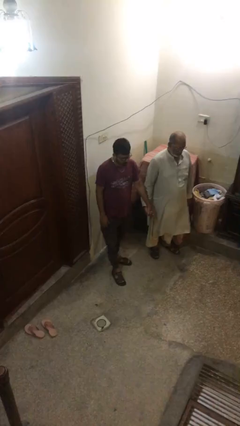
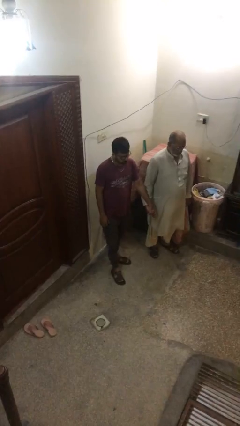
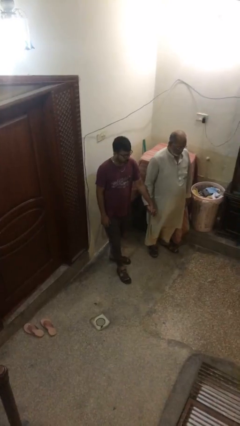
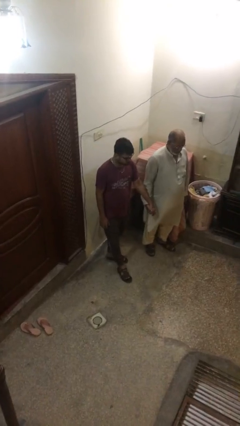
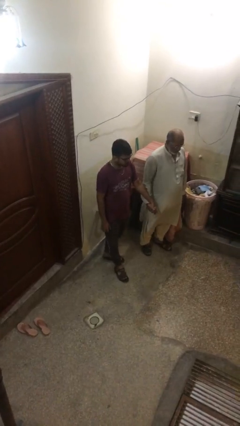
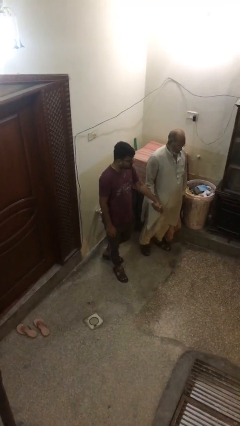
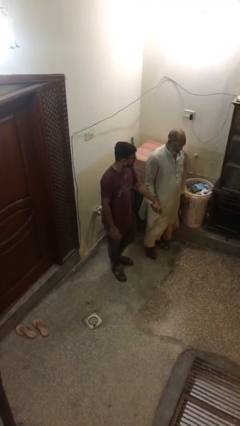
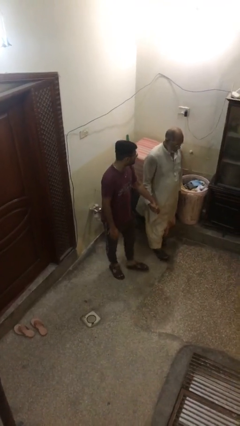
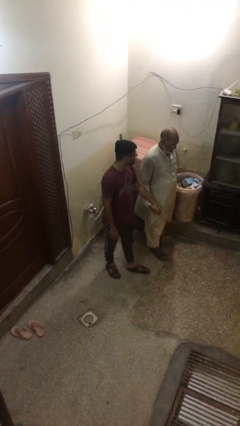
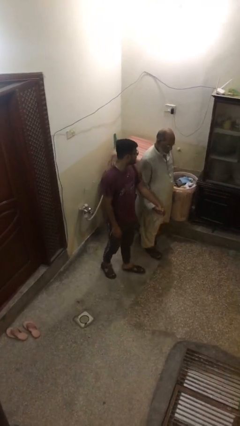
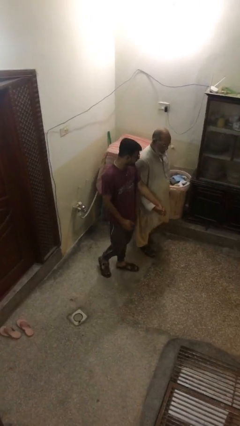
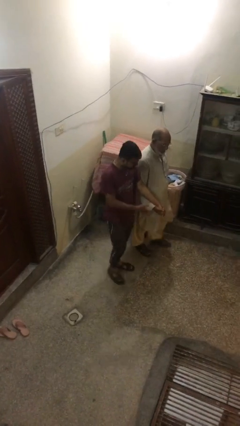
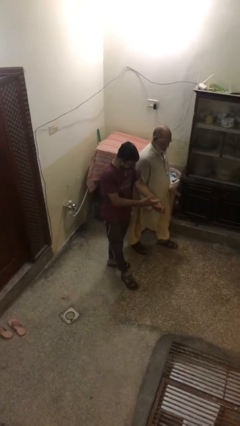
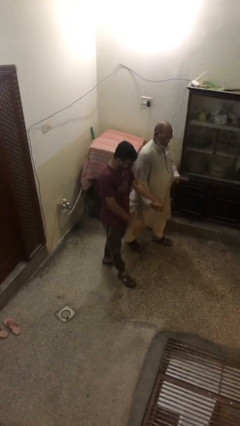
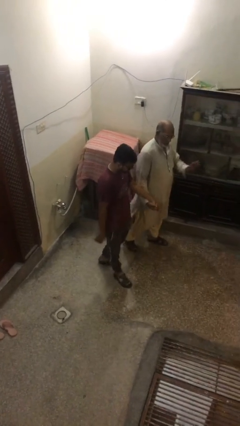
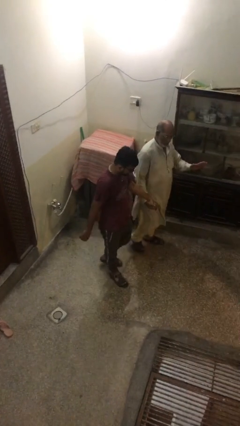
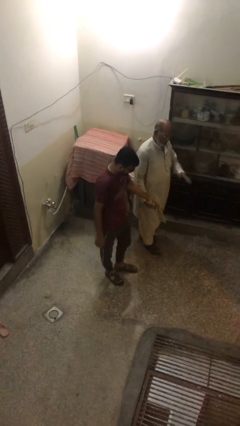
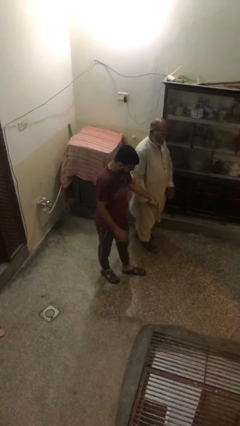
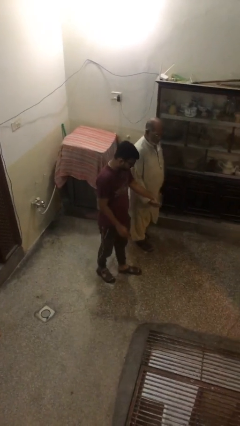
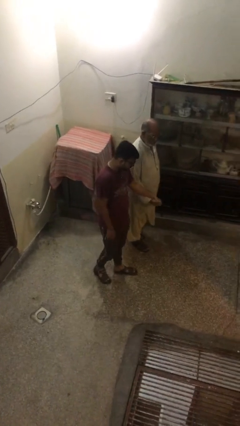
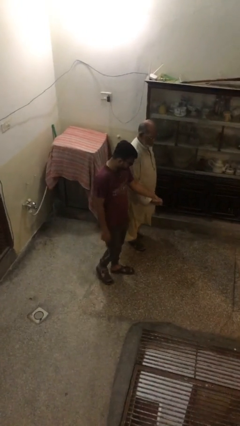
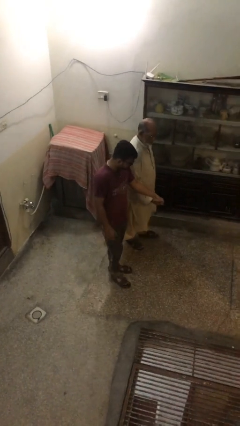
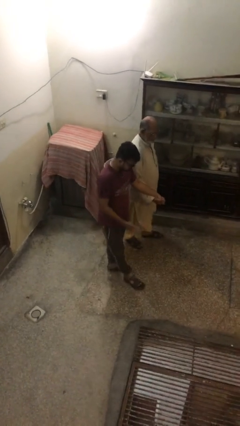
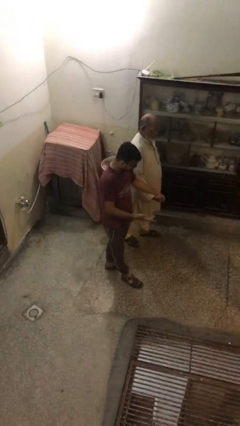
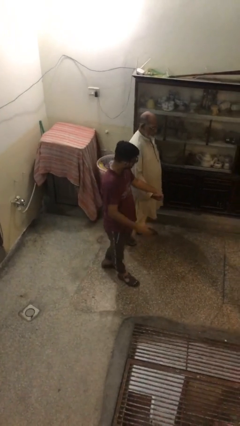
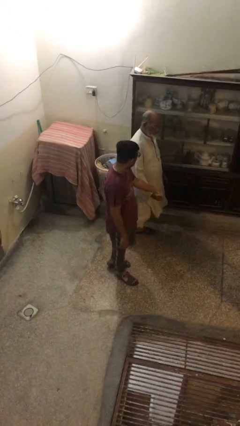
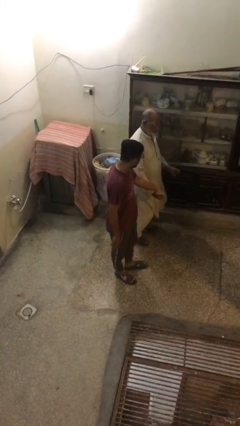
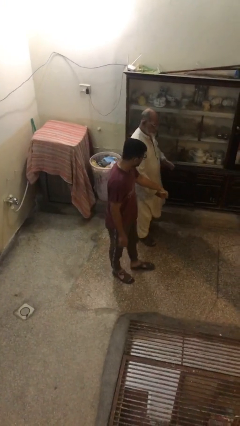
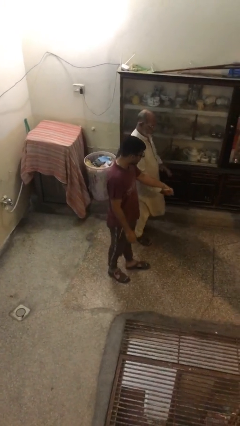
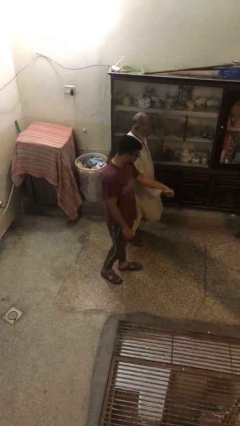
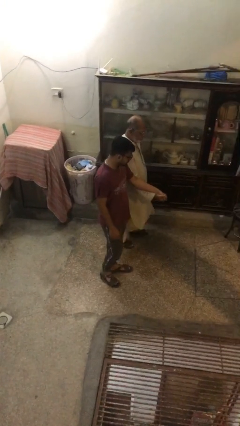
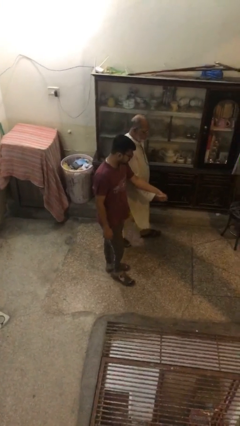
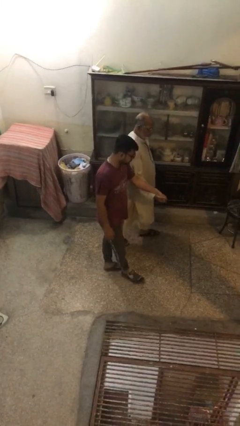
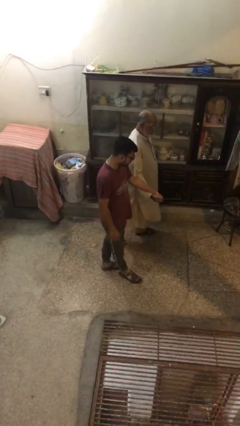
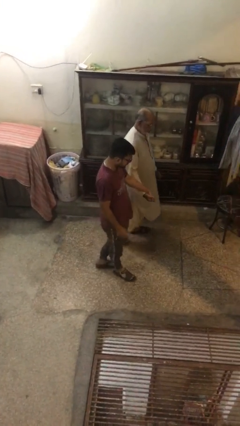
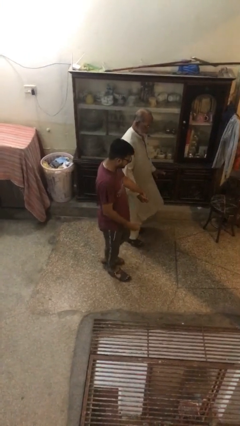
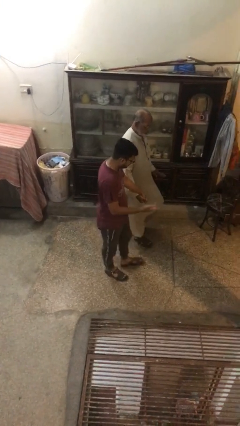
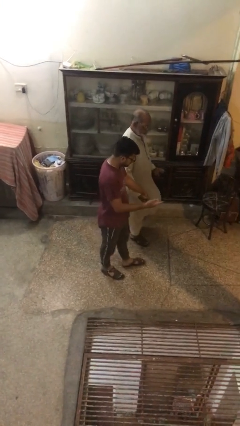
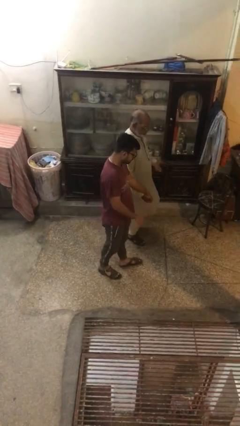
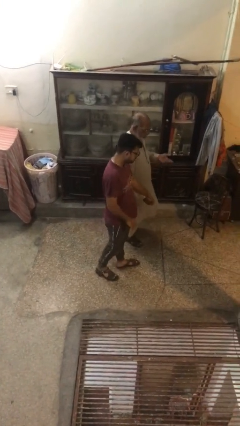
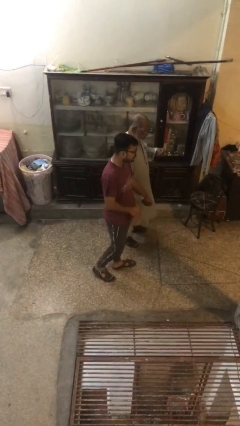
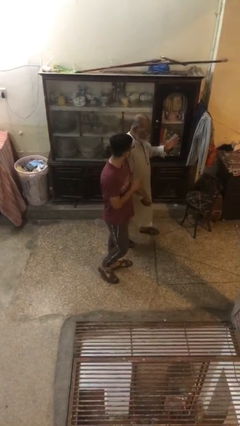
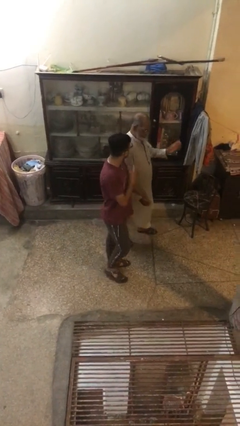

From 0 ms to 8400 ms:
person holds hand

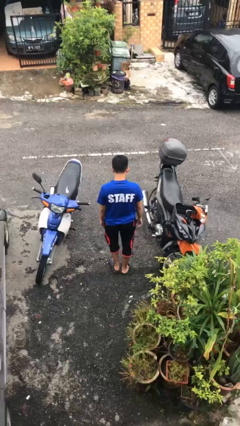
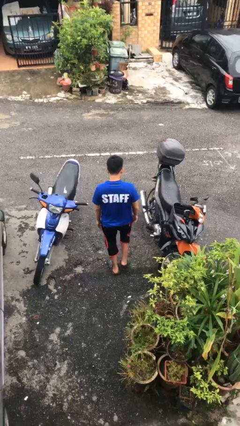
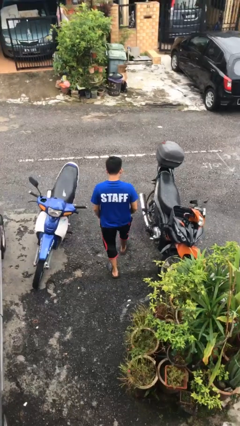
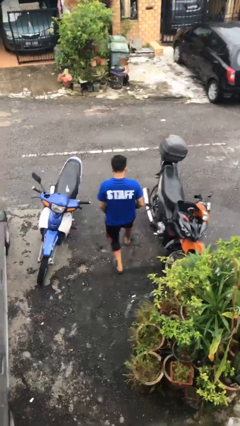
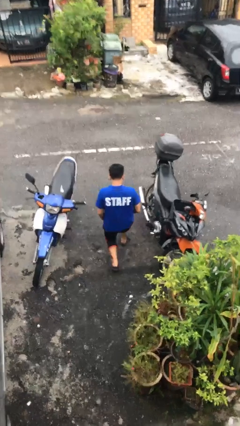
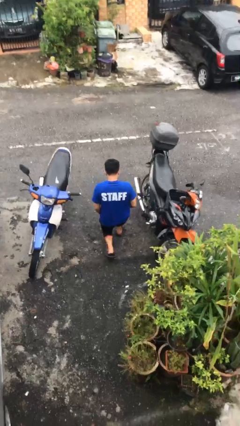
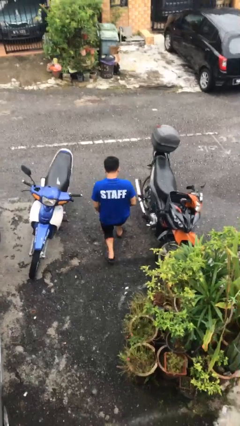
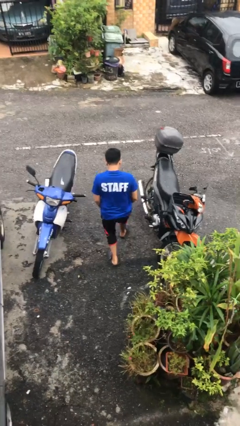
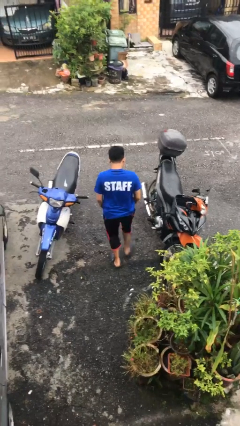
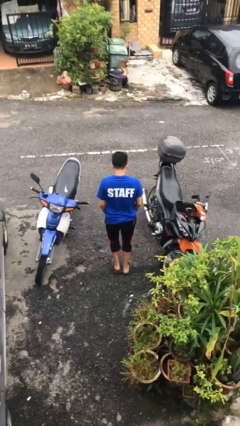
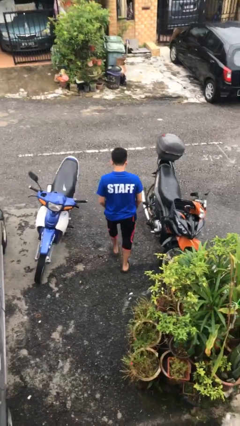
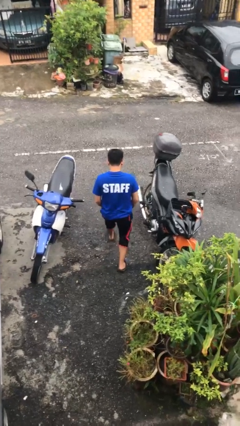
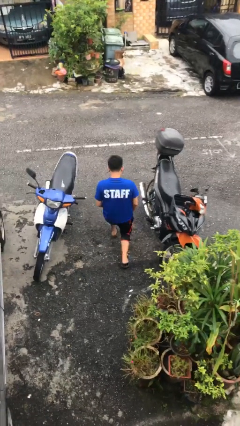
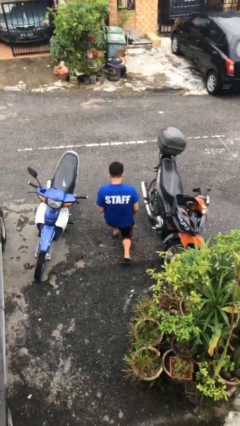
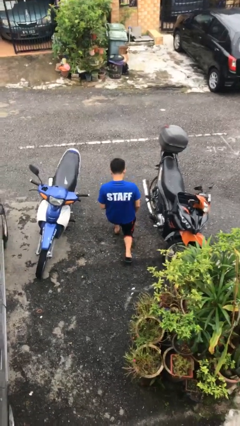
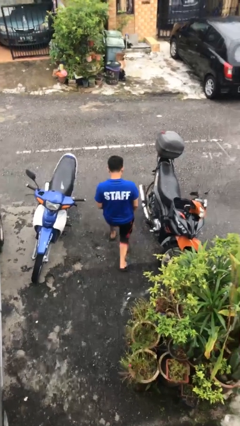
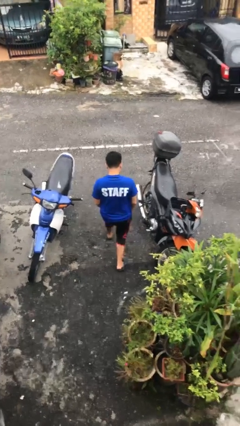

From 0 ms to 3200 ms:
person exercises with lunges

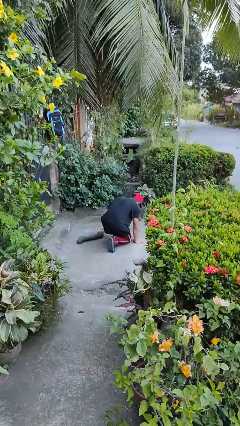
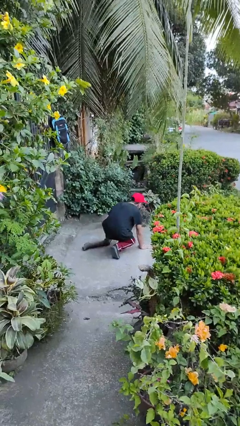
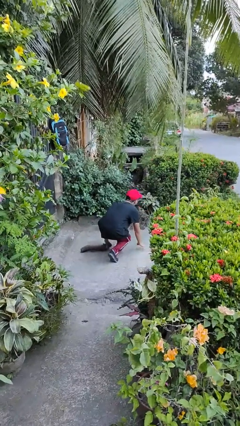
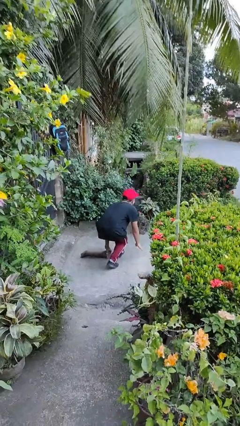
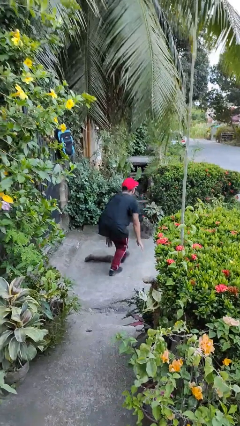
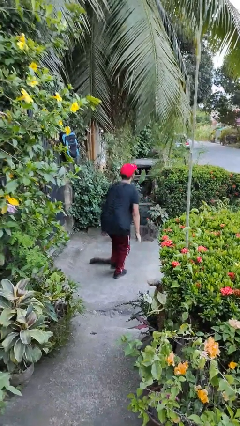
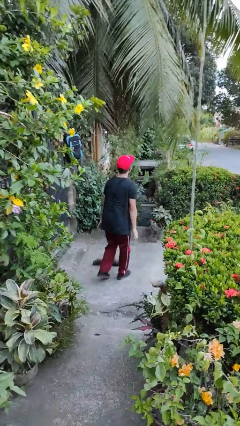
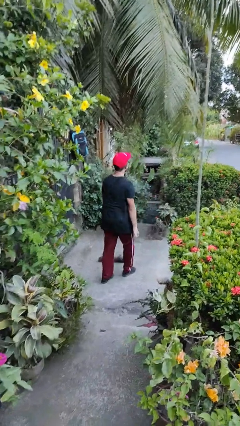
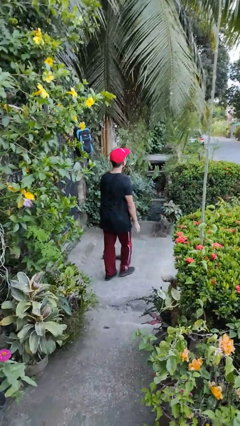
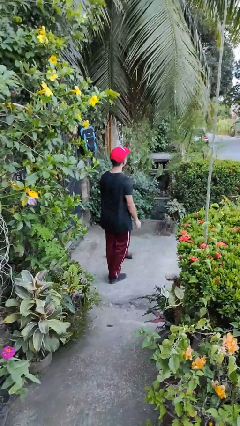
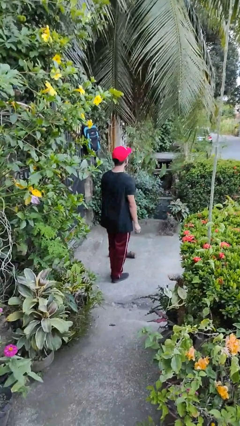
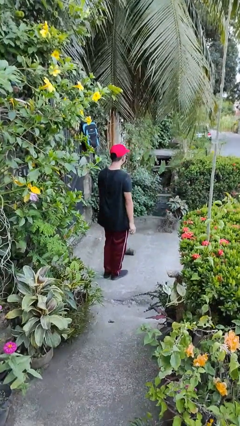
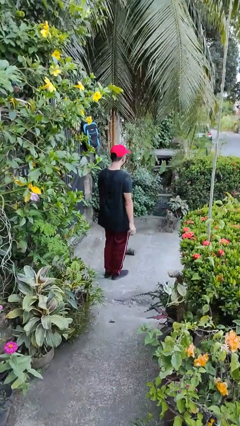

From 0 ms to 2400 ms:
person stands up from floor

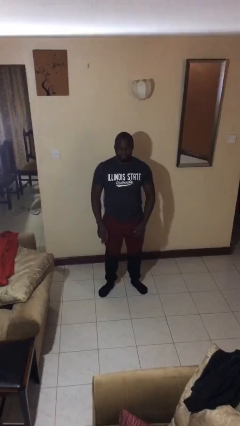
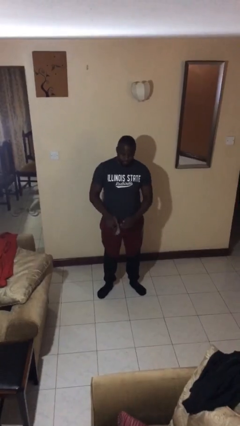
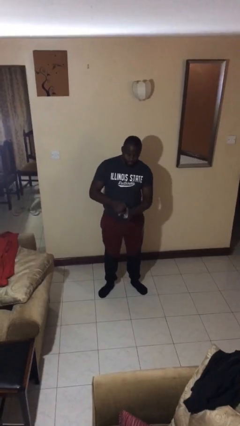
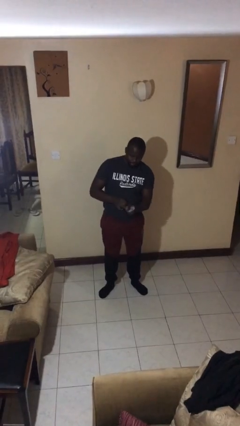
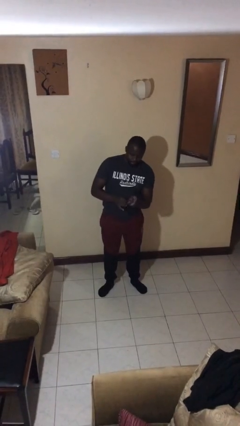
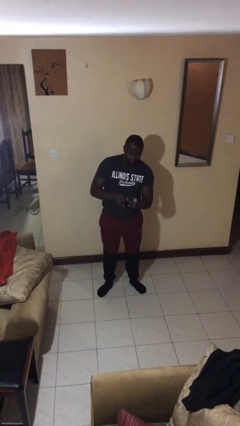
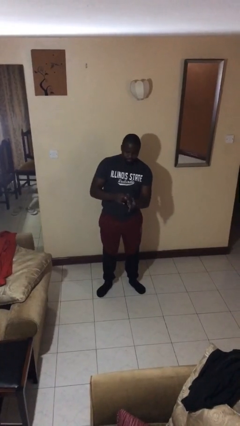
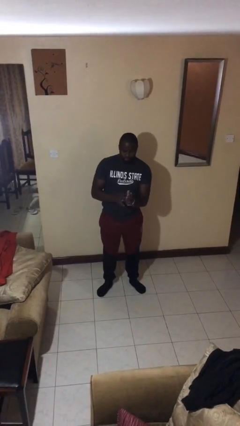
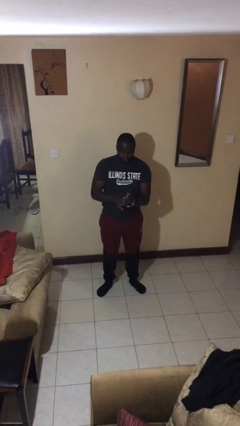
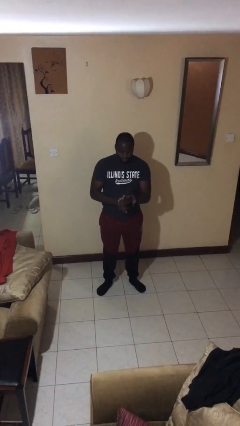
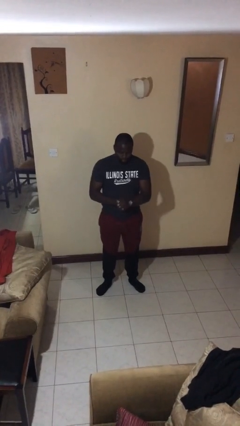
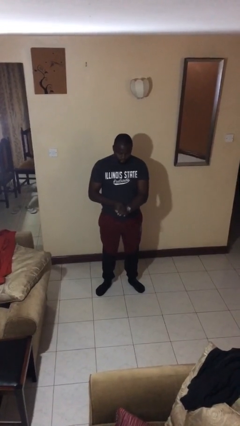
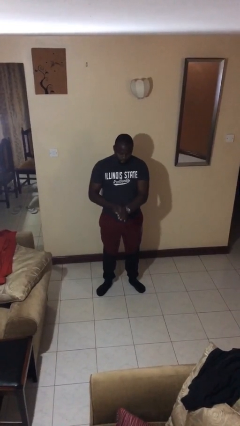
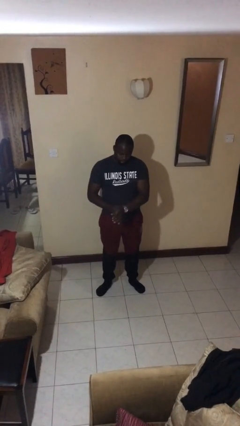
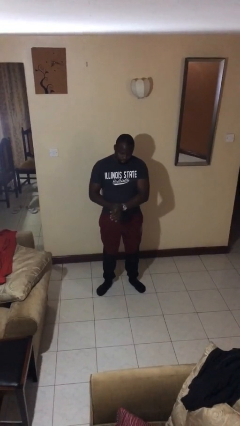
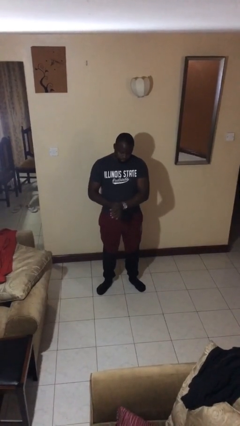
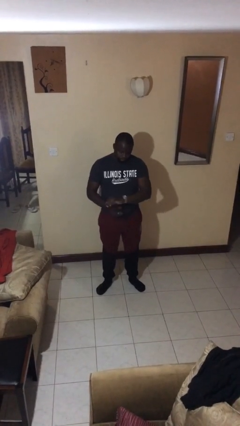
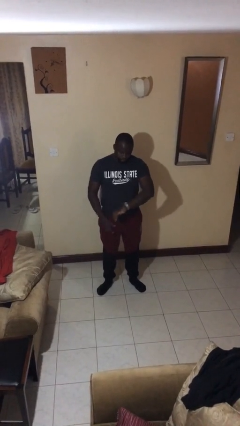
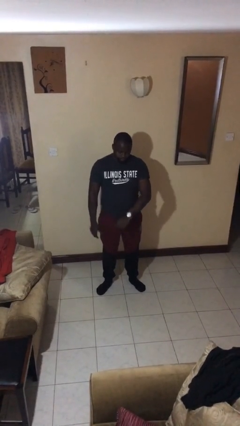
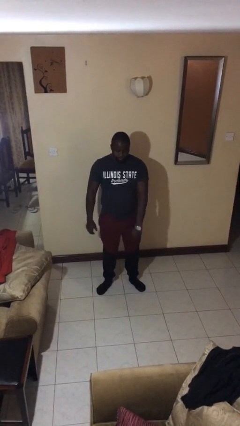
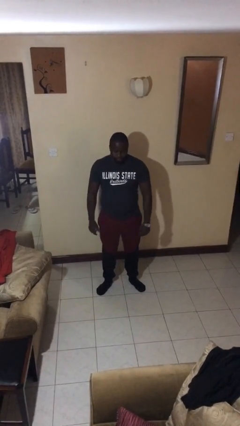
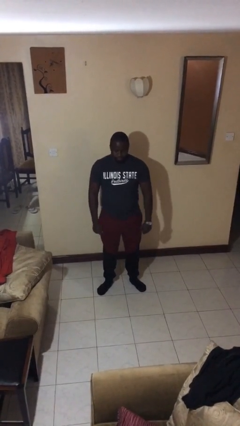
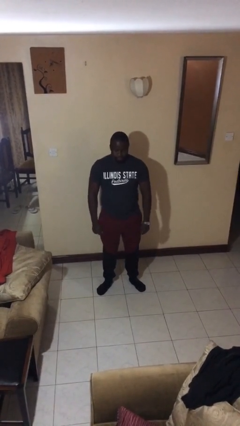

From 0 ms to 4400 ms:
person puts on wristwatch
